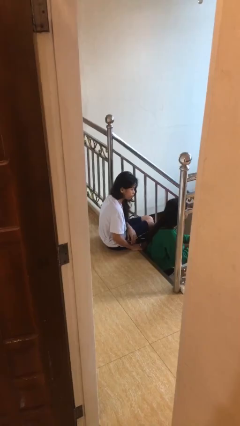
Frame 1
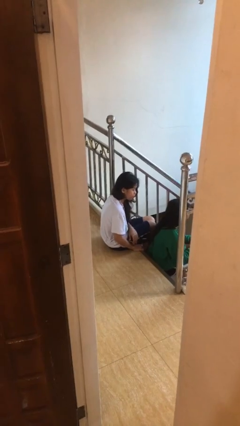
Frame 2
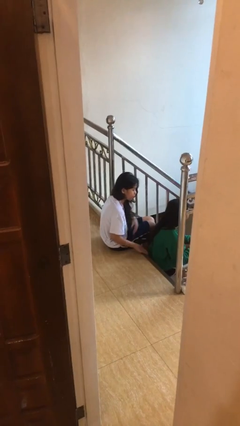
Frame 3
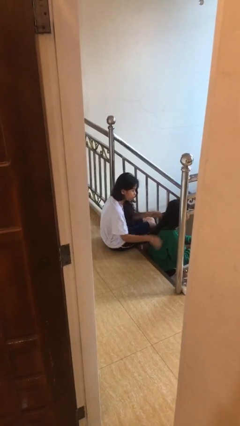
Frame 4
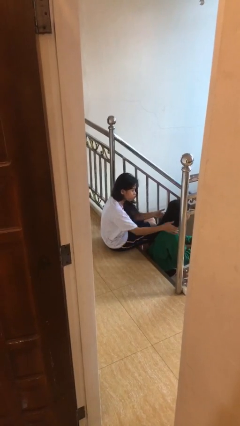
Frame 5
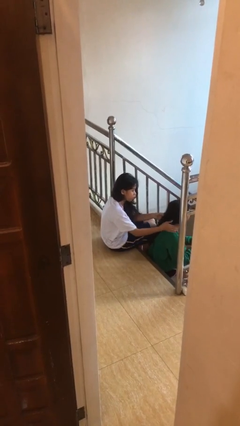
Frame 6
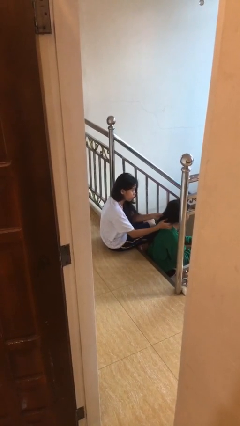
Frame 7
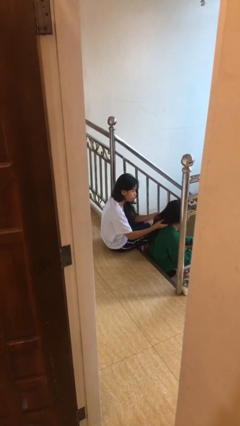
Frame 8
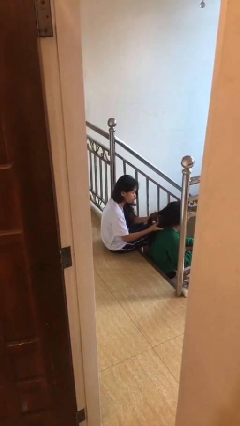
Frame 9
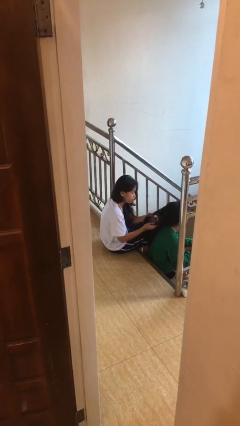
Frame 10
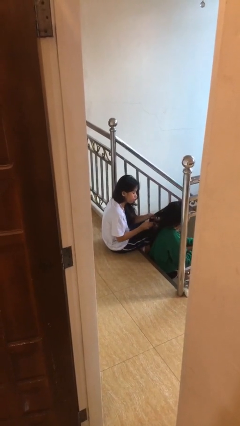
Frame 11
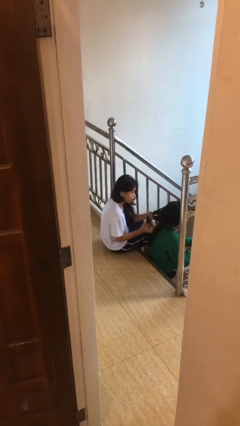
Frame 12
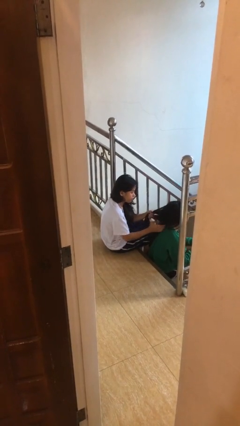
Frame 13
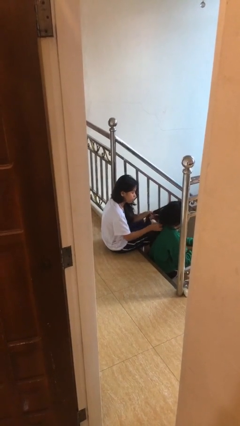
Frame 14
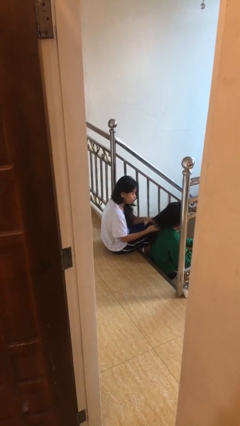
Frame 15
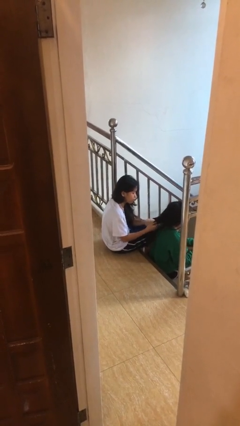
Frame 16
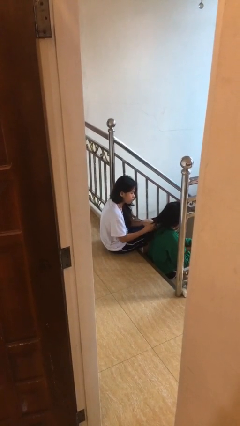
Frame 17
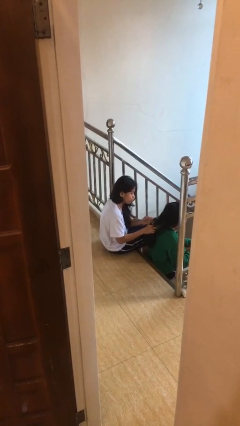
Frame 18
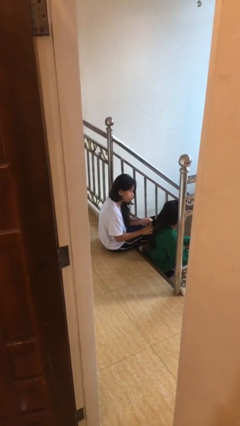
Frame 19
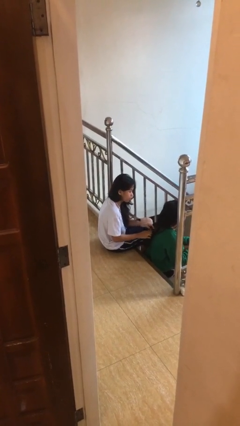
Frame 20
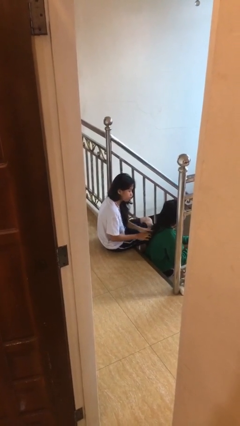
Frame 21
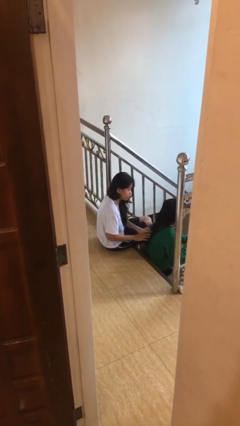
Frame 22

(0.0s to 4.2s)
person braids hair of person

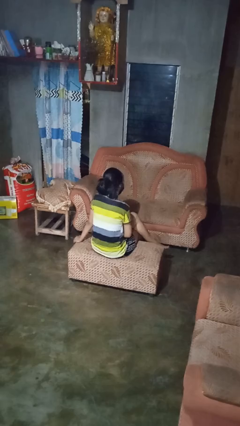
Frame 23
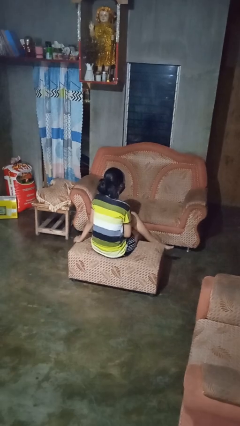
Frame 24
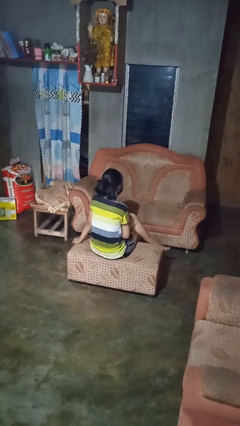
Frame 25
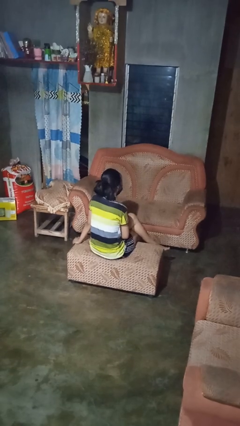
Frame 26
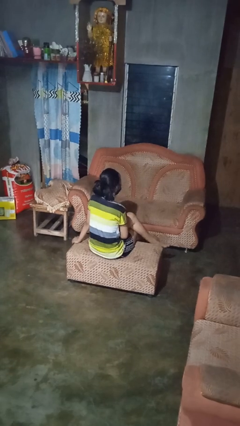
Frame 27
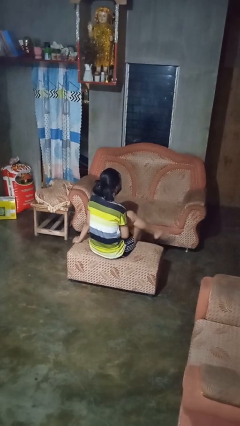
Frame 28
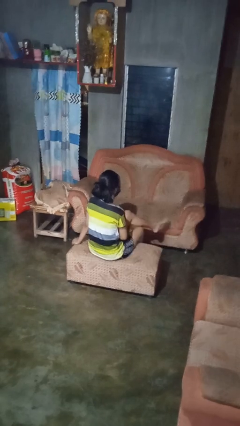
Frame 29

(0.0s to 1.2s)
person crosses legs

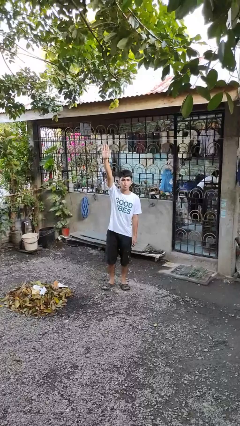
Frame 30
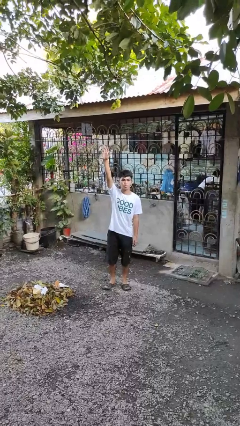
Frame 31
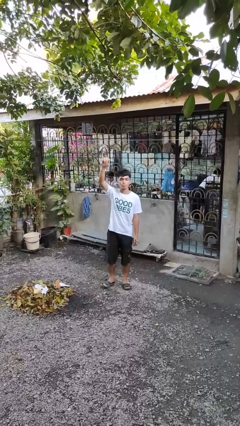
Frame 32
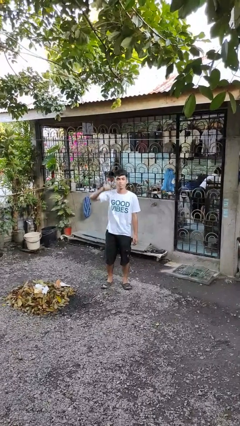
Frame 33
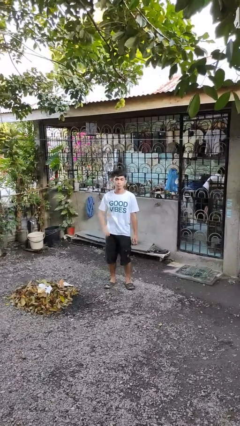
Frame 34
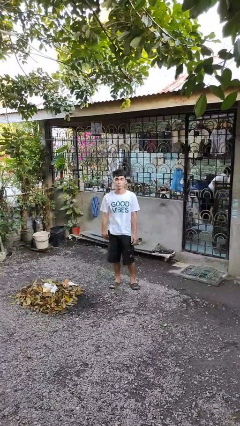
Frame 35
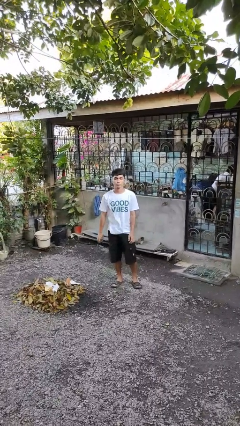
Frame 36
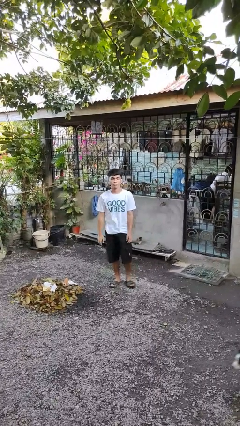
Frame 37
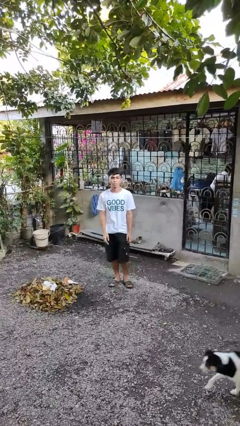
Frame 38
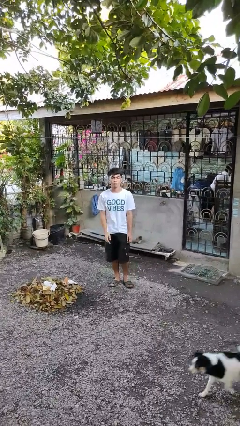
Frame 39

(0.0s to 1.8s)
person gestures lower hand

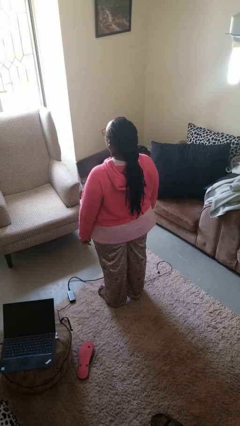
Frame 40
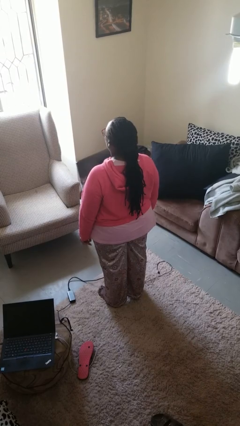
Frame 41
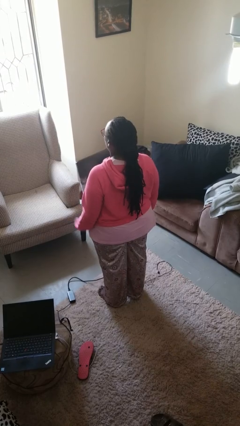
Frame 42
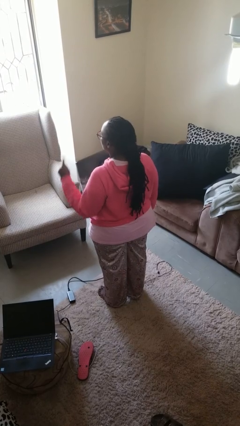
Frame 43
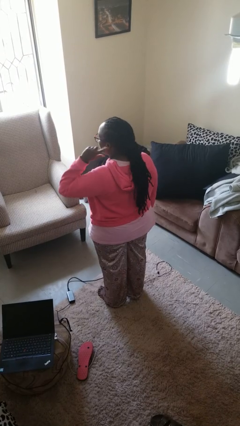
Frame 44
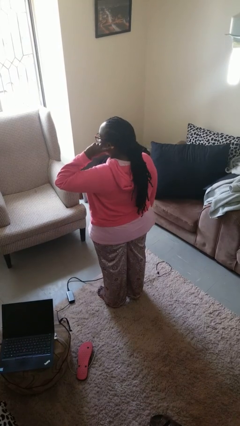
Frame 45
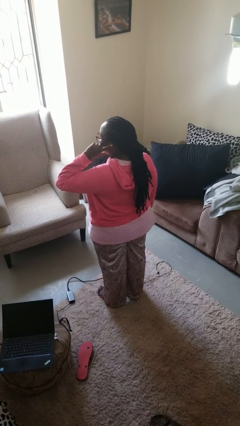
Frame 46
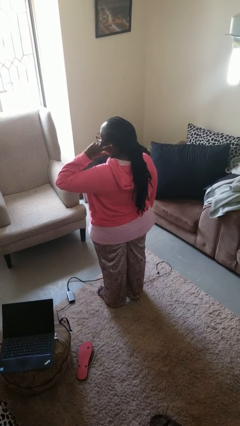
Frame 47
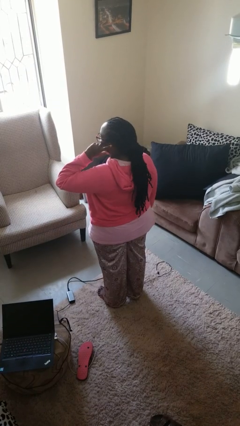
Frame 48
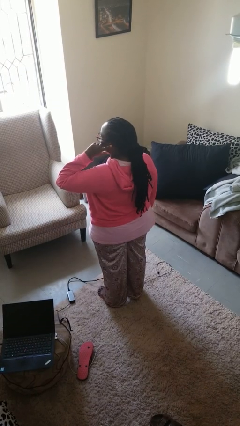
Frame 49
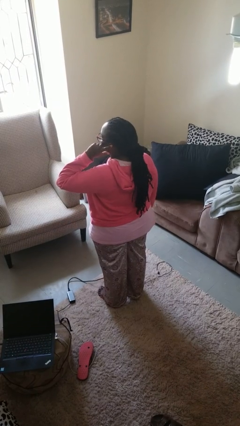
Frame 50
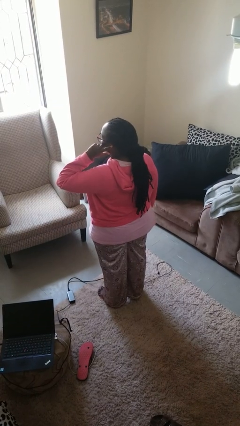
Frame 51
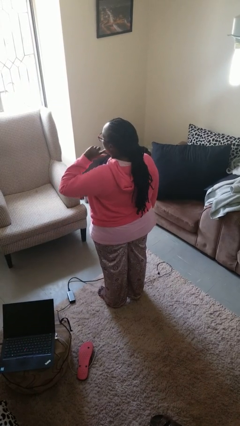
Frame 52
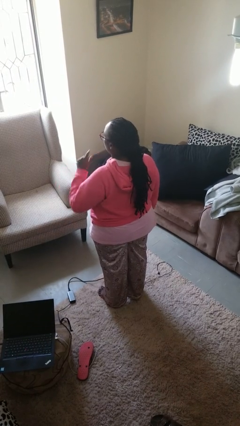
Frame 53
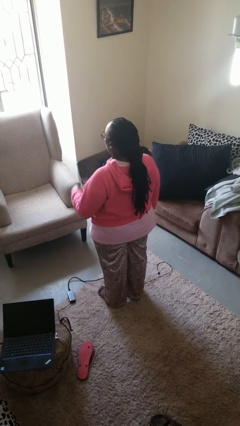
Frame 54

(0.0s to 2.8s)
person gestures listen closely

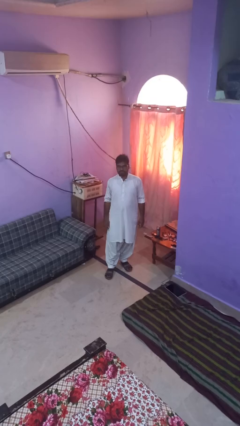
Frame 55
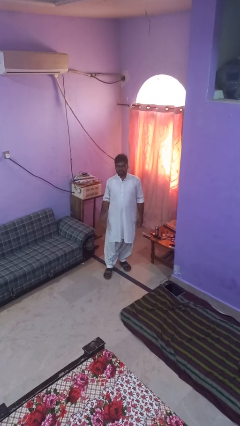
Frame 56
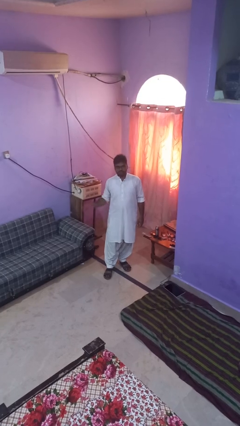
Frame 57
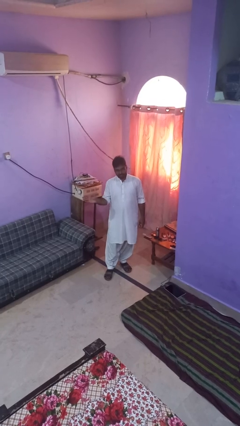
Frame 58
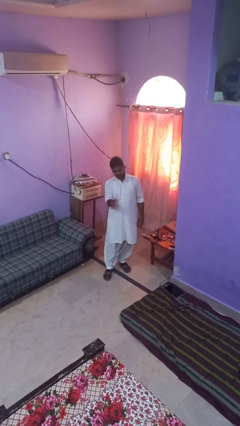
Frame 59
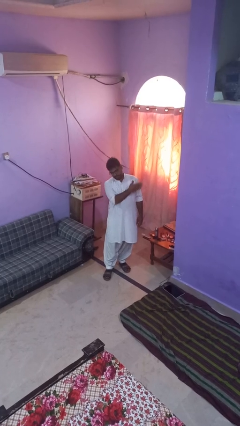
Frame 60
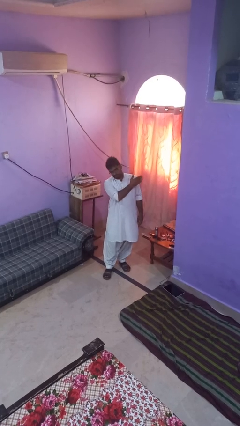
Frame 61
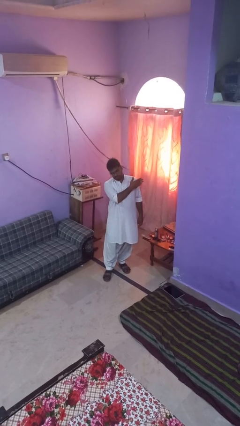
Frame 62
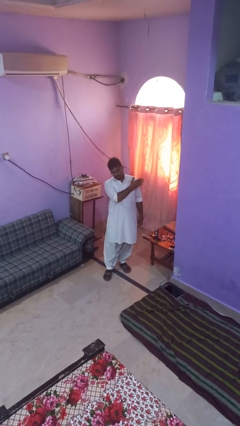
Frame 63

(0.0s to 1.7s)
person gestures swipe left

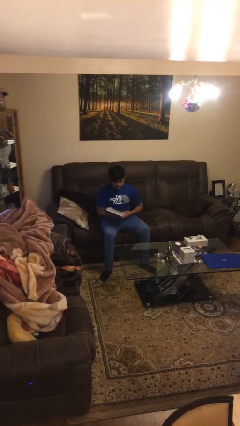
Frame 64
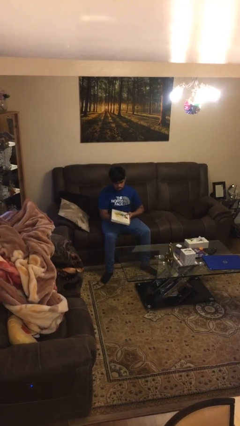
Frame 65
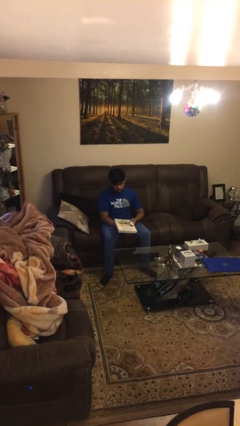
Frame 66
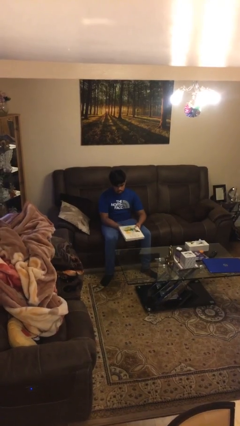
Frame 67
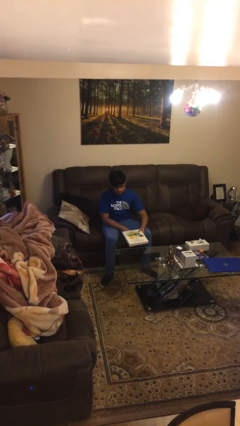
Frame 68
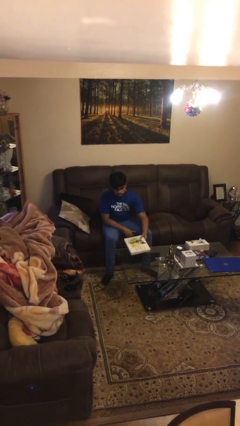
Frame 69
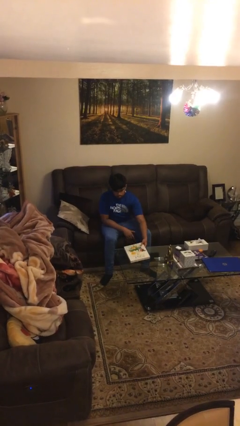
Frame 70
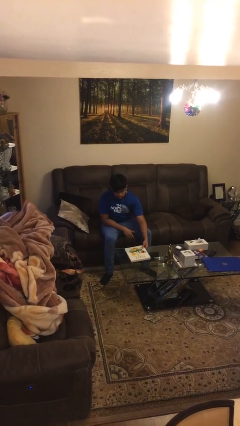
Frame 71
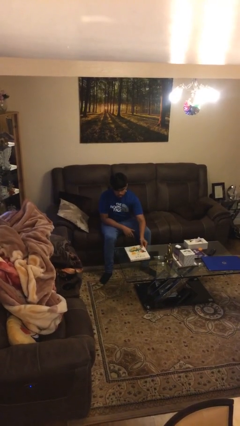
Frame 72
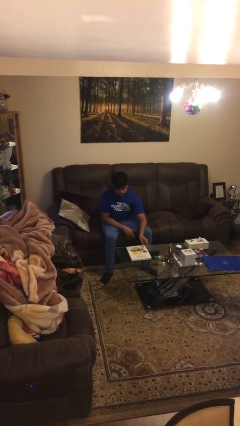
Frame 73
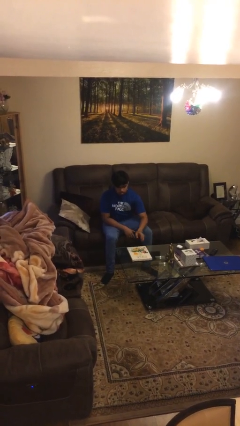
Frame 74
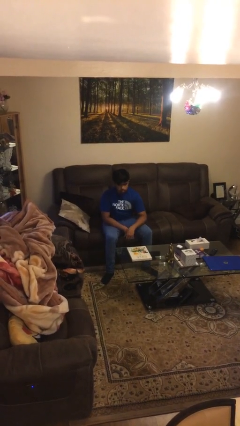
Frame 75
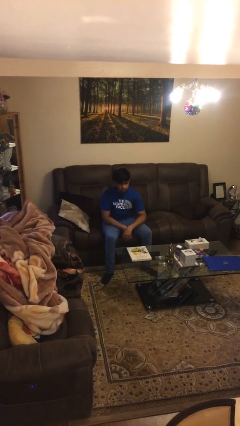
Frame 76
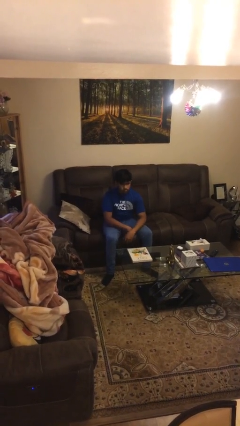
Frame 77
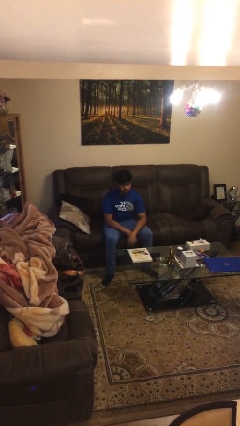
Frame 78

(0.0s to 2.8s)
person puts down object on table

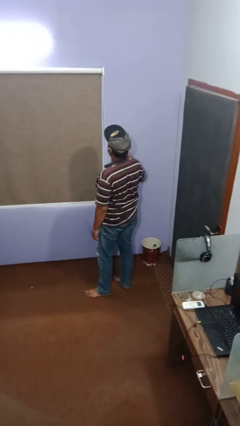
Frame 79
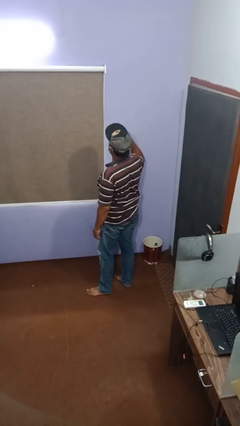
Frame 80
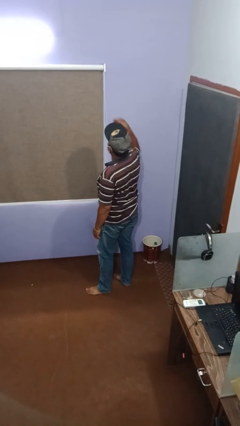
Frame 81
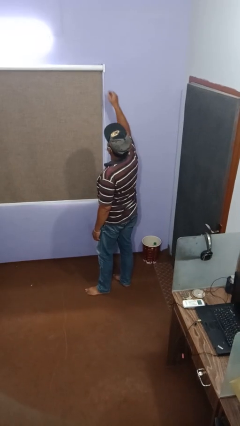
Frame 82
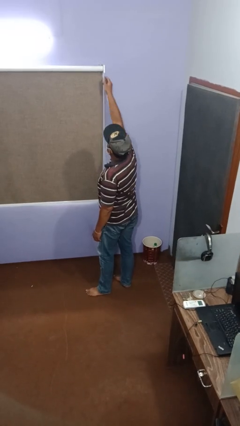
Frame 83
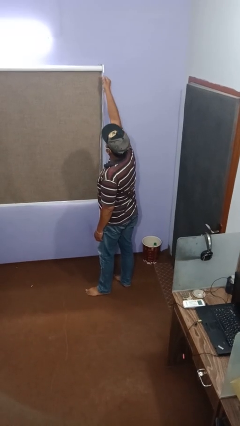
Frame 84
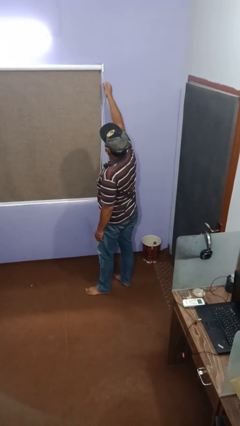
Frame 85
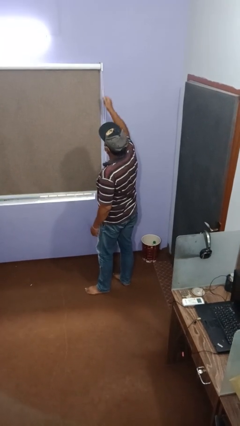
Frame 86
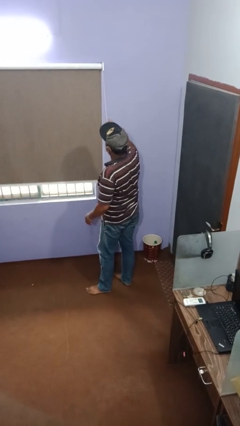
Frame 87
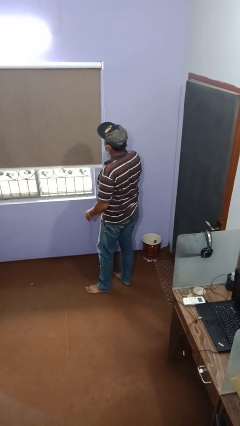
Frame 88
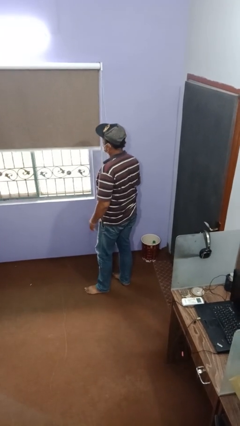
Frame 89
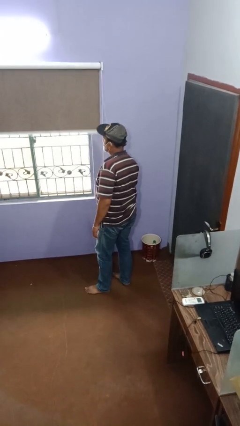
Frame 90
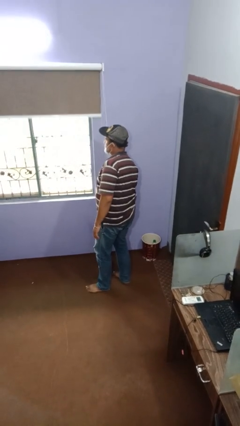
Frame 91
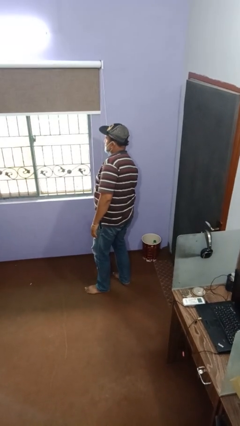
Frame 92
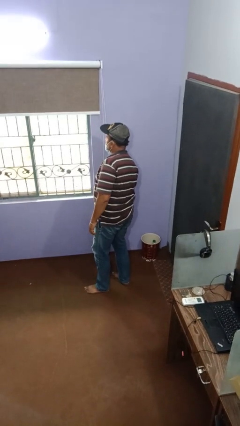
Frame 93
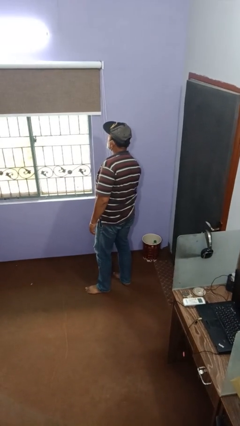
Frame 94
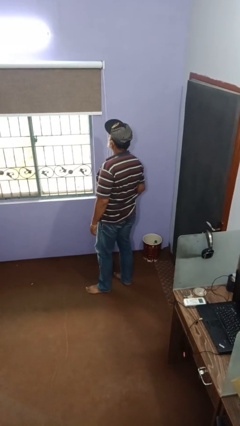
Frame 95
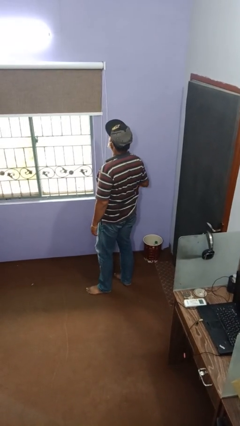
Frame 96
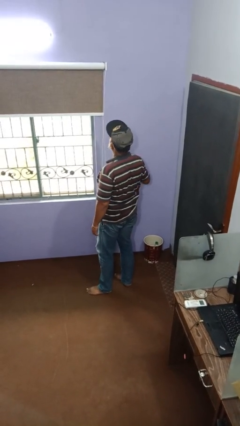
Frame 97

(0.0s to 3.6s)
person opens curtains
